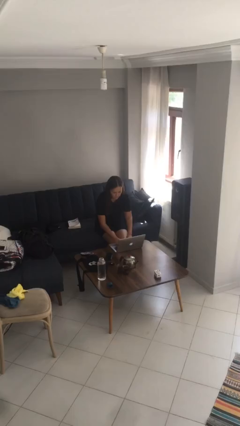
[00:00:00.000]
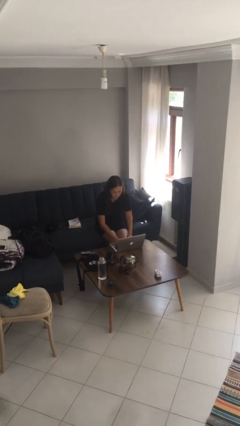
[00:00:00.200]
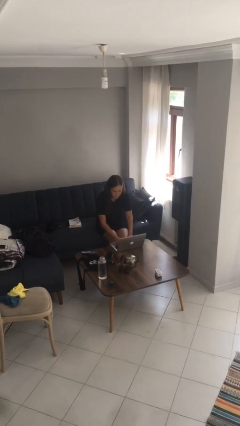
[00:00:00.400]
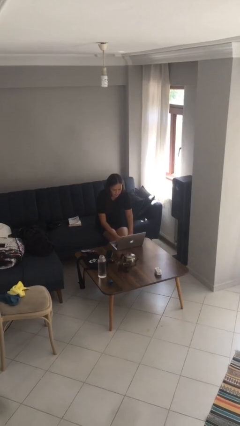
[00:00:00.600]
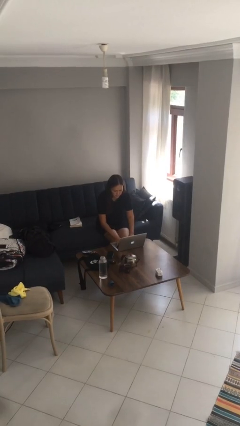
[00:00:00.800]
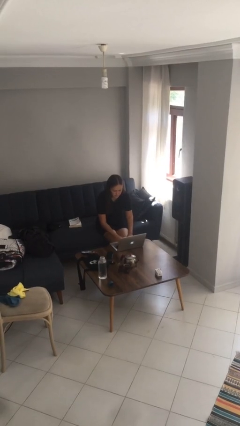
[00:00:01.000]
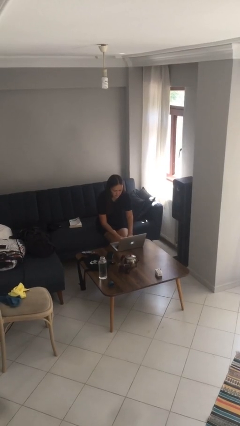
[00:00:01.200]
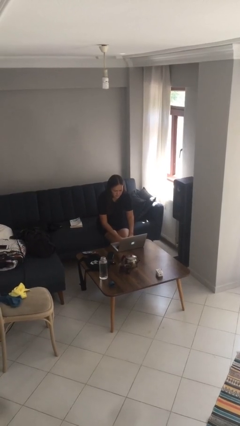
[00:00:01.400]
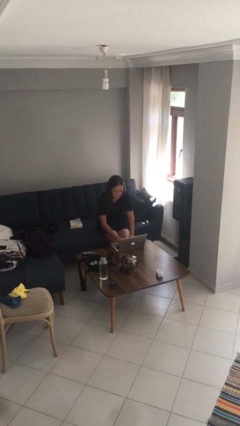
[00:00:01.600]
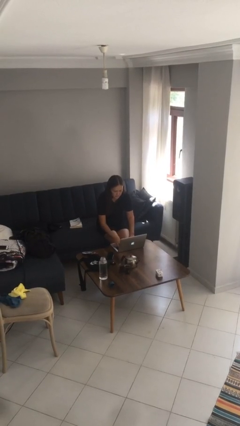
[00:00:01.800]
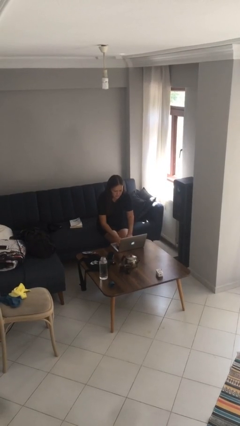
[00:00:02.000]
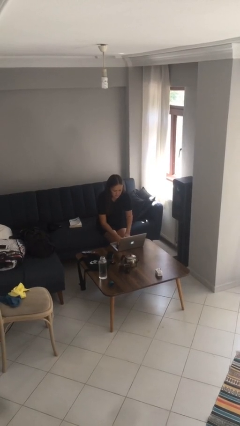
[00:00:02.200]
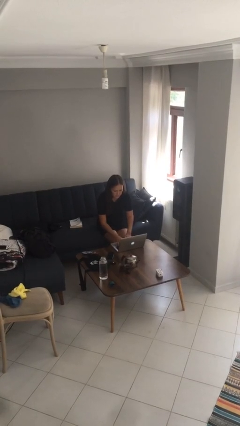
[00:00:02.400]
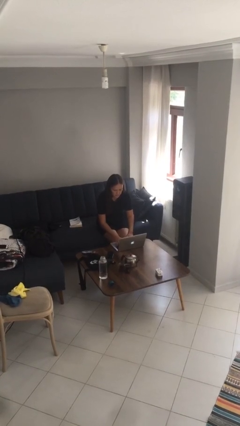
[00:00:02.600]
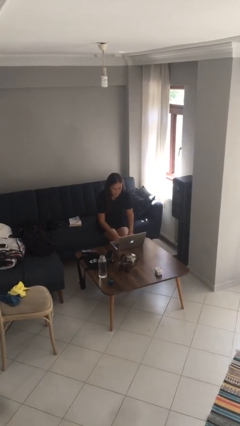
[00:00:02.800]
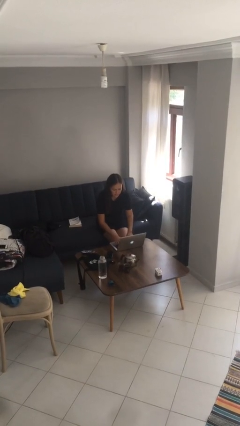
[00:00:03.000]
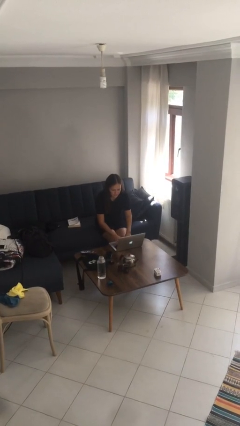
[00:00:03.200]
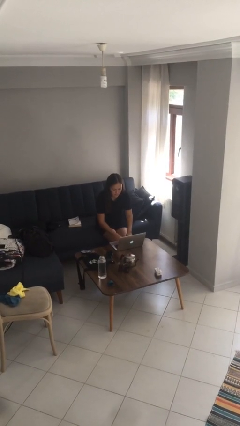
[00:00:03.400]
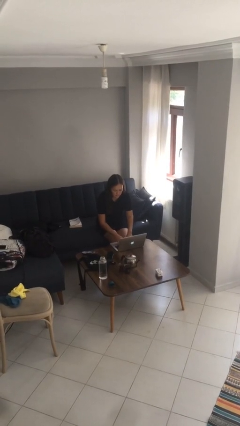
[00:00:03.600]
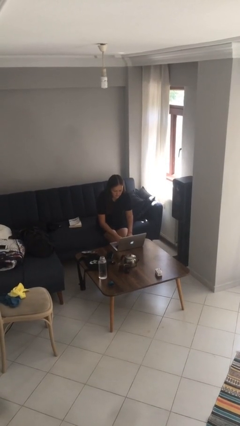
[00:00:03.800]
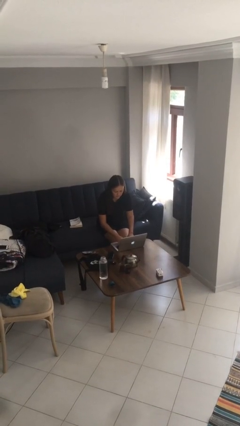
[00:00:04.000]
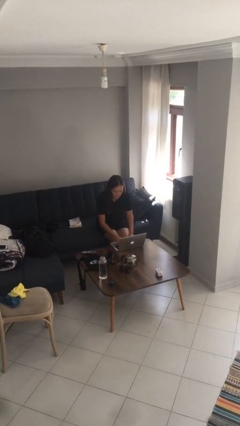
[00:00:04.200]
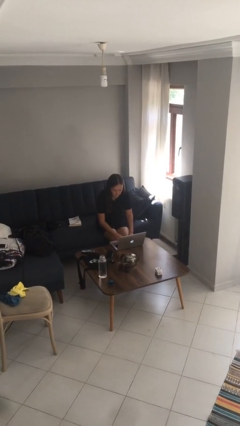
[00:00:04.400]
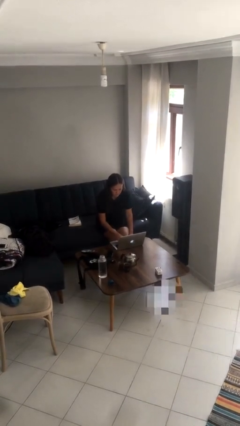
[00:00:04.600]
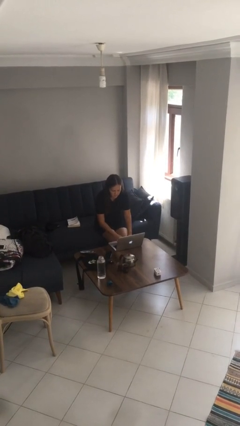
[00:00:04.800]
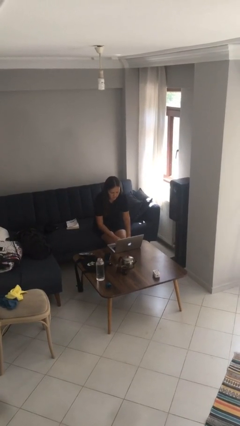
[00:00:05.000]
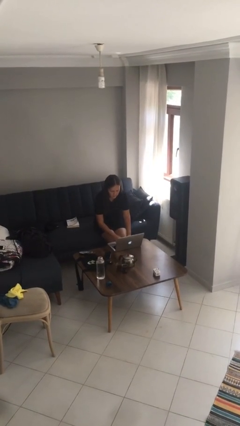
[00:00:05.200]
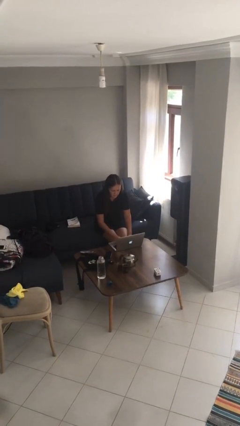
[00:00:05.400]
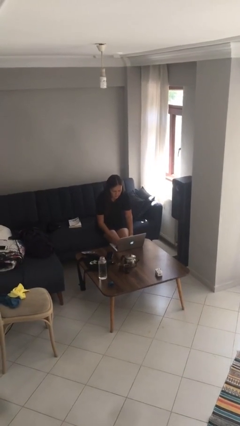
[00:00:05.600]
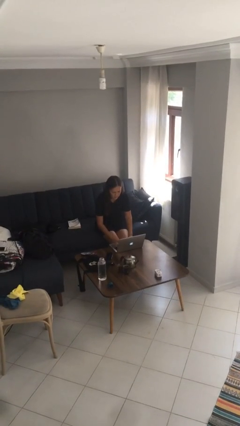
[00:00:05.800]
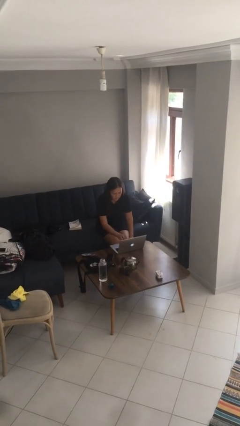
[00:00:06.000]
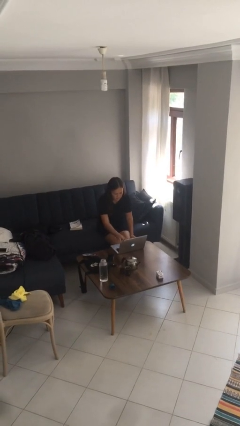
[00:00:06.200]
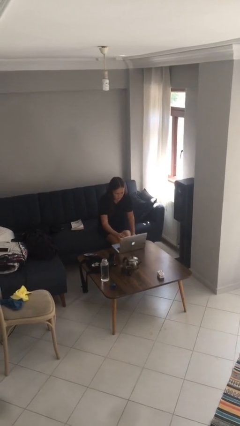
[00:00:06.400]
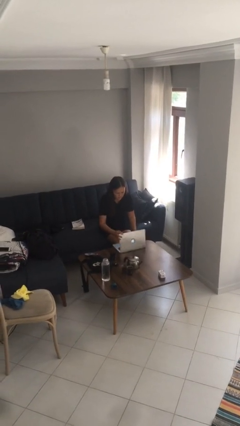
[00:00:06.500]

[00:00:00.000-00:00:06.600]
person interacts with laptop

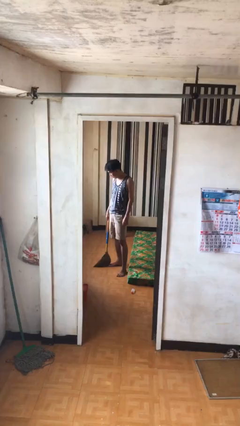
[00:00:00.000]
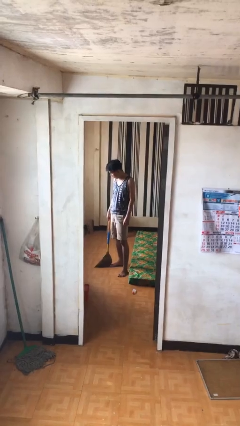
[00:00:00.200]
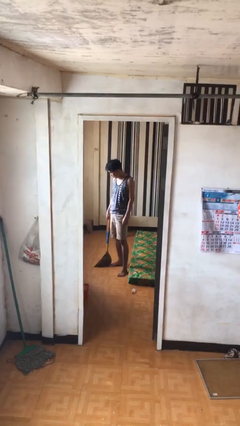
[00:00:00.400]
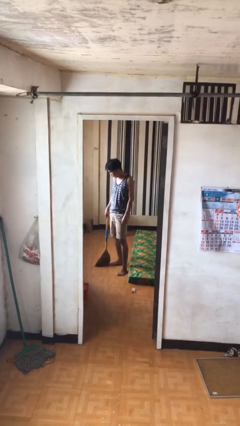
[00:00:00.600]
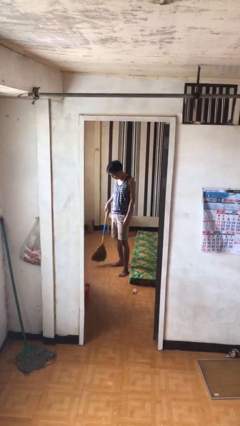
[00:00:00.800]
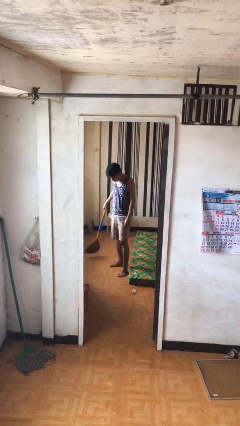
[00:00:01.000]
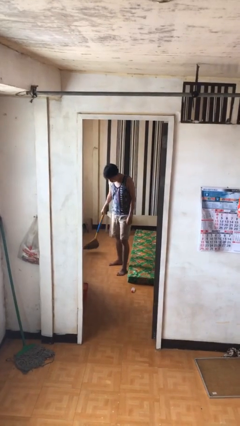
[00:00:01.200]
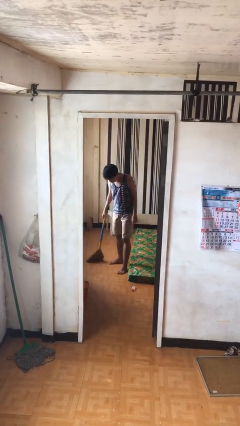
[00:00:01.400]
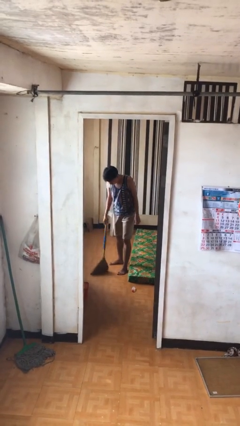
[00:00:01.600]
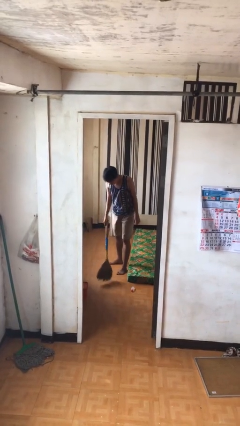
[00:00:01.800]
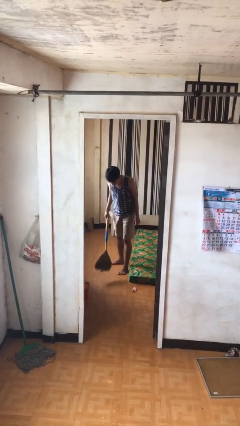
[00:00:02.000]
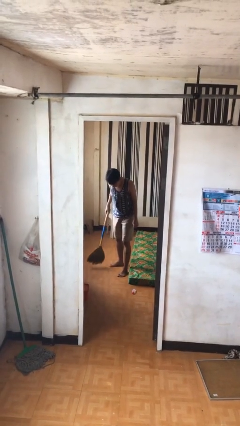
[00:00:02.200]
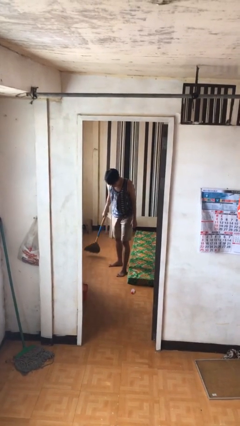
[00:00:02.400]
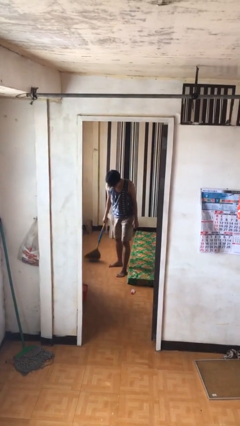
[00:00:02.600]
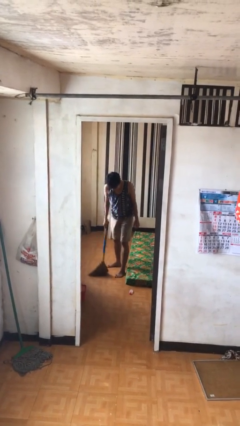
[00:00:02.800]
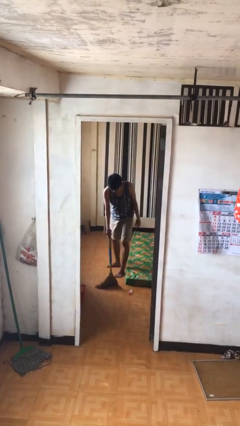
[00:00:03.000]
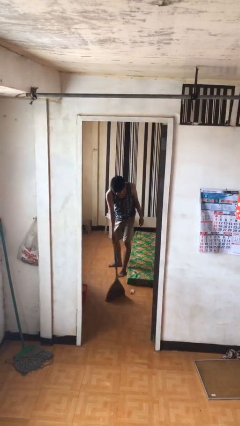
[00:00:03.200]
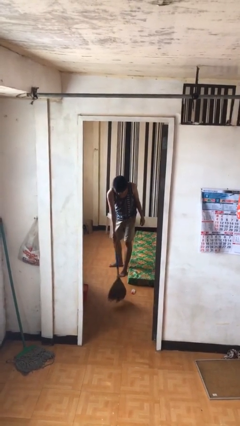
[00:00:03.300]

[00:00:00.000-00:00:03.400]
person sweeps floor

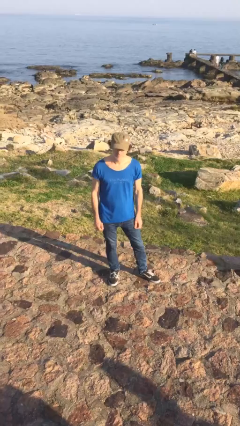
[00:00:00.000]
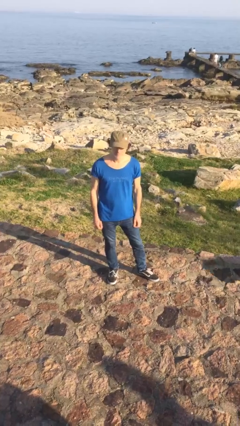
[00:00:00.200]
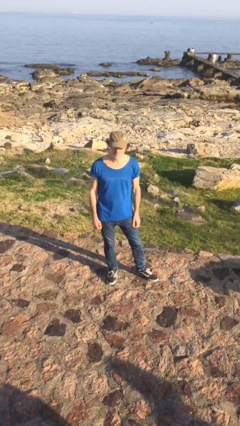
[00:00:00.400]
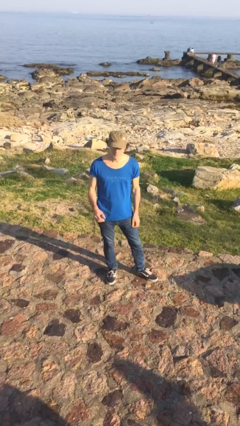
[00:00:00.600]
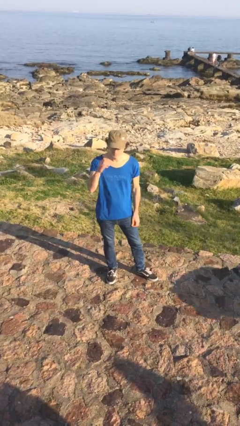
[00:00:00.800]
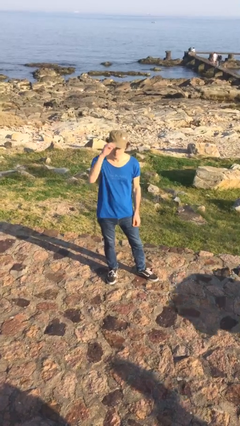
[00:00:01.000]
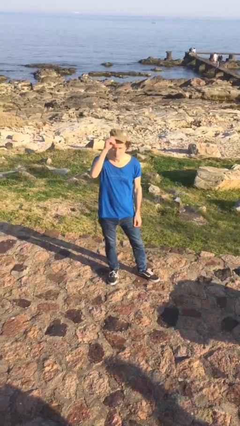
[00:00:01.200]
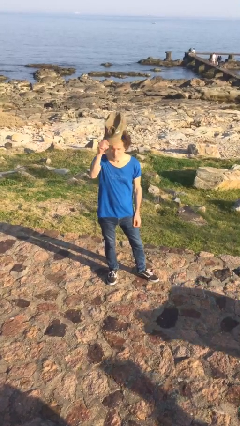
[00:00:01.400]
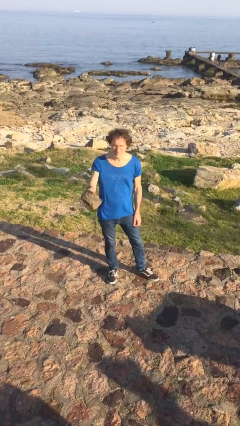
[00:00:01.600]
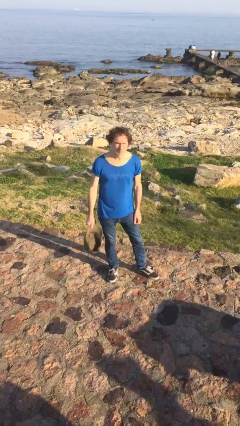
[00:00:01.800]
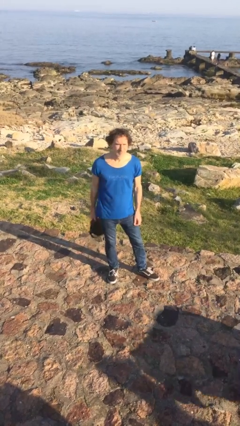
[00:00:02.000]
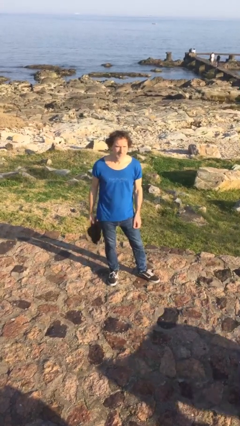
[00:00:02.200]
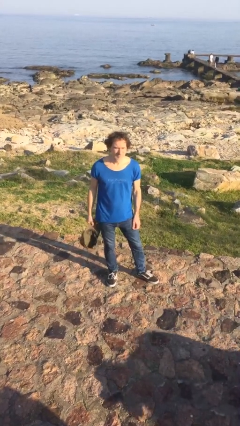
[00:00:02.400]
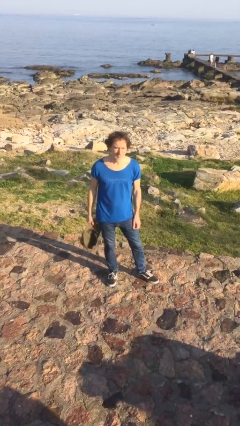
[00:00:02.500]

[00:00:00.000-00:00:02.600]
person takes off hat

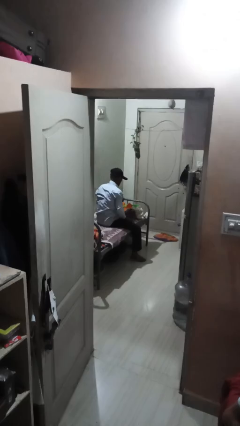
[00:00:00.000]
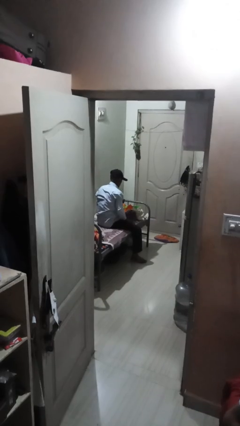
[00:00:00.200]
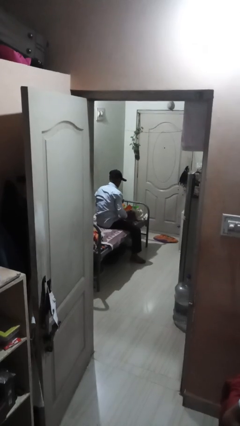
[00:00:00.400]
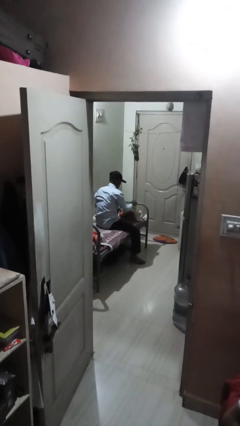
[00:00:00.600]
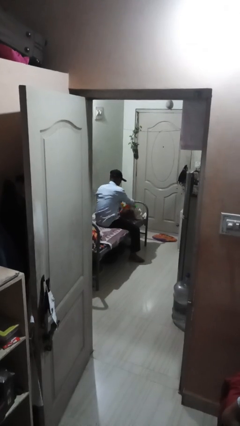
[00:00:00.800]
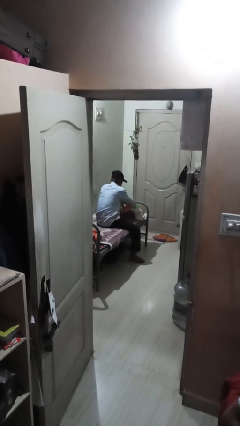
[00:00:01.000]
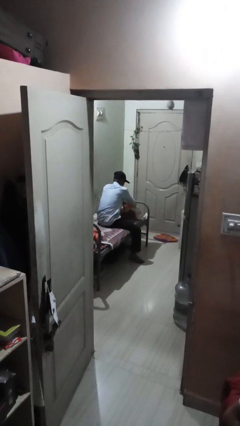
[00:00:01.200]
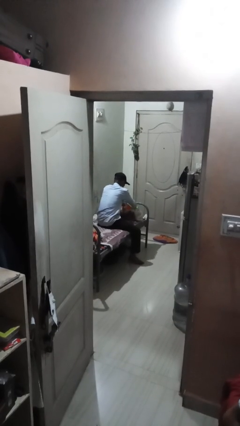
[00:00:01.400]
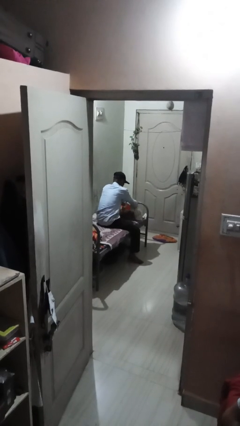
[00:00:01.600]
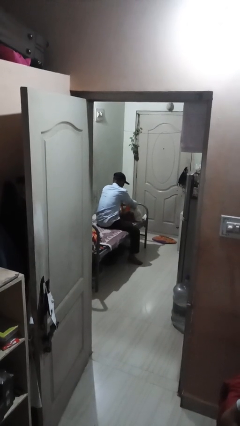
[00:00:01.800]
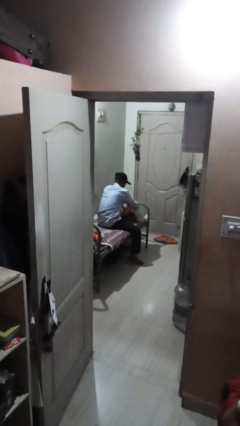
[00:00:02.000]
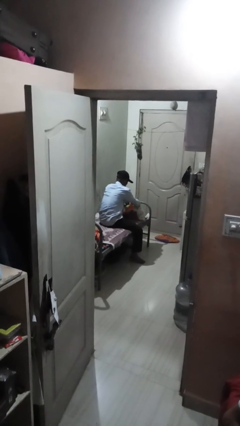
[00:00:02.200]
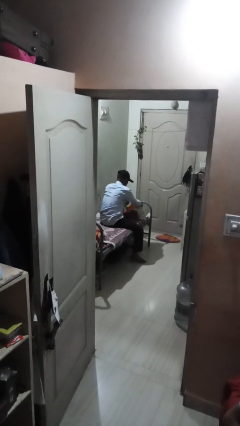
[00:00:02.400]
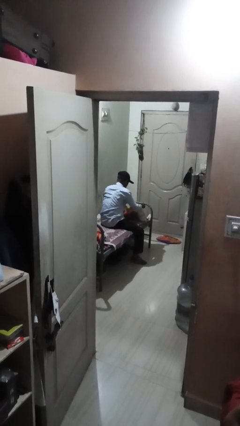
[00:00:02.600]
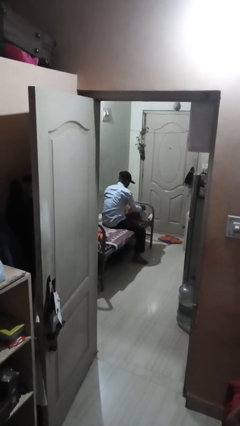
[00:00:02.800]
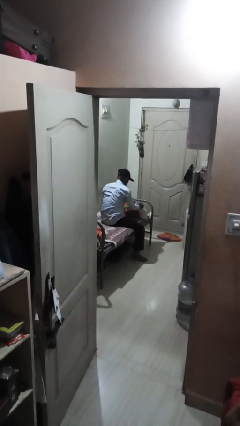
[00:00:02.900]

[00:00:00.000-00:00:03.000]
person searches in bag

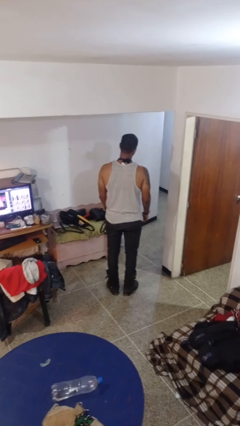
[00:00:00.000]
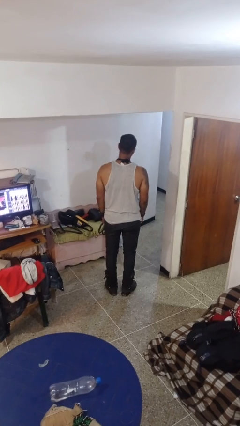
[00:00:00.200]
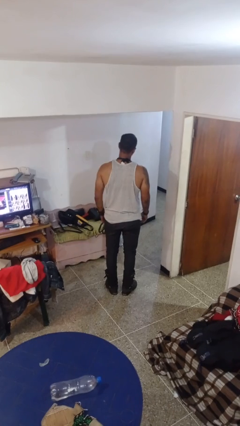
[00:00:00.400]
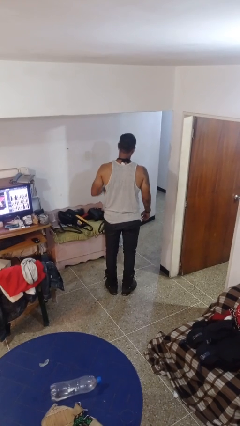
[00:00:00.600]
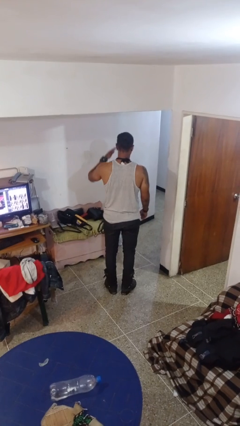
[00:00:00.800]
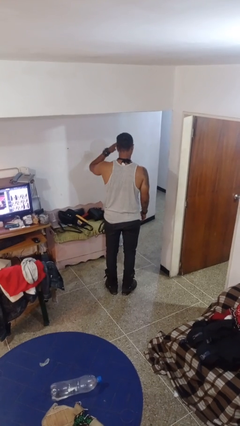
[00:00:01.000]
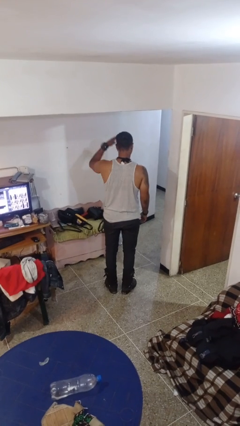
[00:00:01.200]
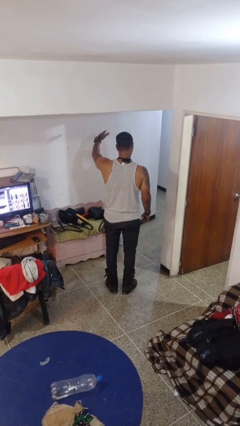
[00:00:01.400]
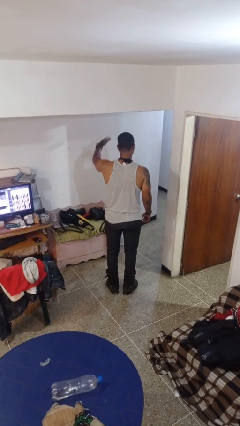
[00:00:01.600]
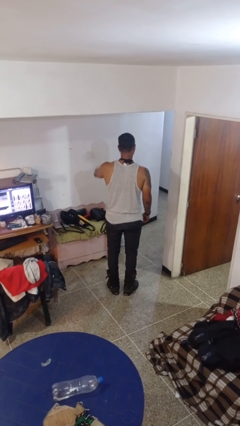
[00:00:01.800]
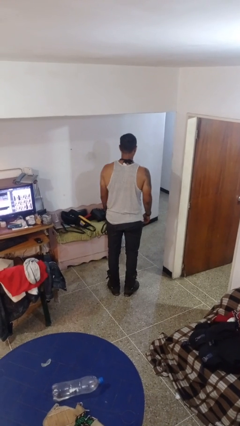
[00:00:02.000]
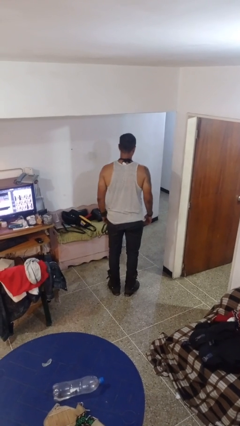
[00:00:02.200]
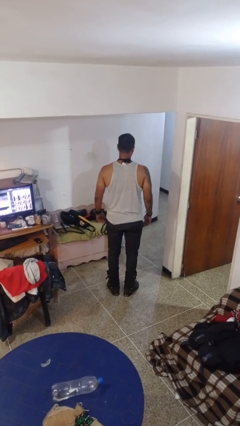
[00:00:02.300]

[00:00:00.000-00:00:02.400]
person salutes
